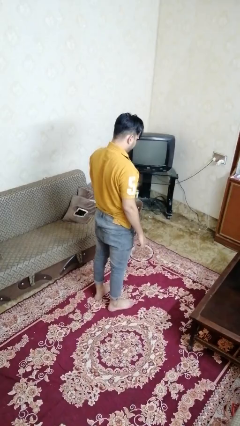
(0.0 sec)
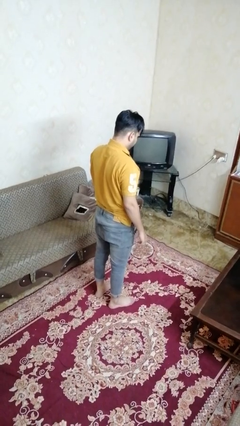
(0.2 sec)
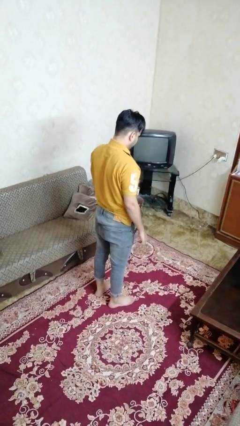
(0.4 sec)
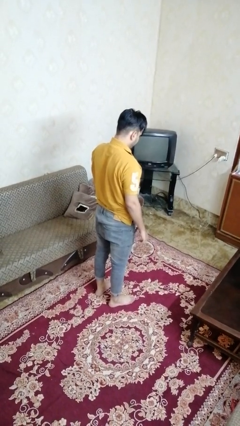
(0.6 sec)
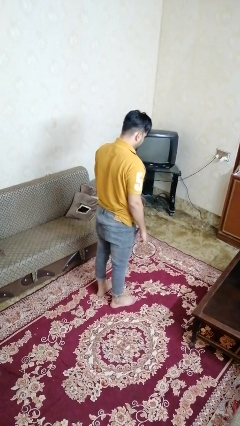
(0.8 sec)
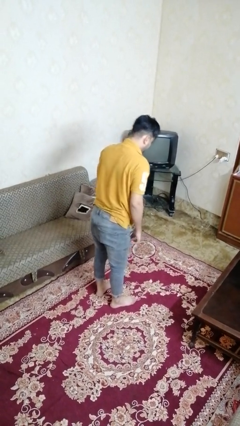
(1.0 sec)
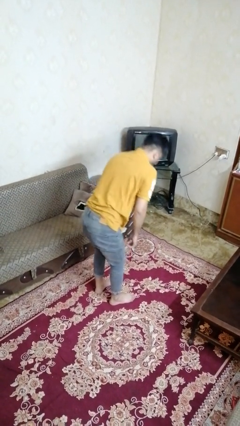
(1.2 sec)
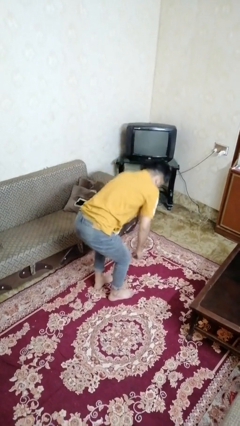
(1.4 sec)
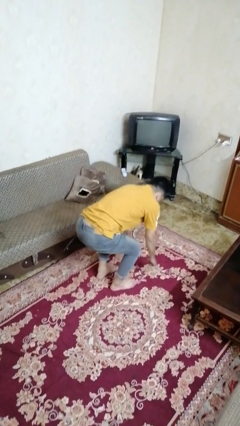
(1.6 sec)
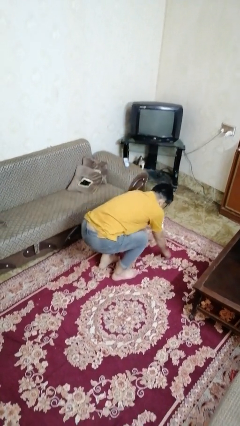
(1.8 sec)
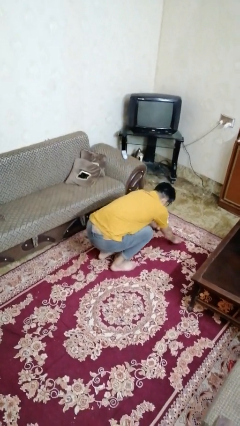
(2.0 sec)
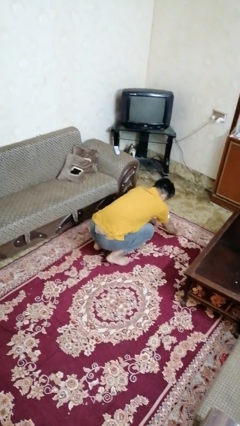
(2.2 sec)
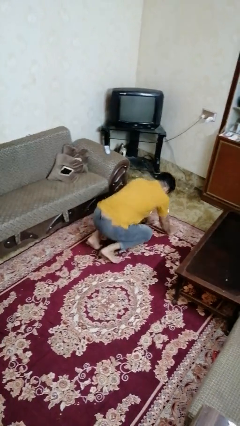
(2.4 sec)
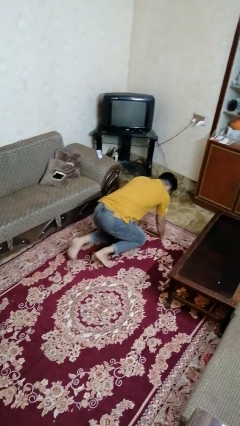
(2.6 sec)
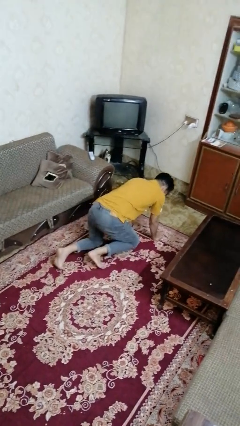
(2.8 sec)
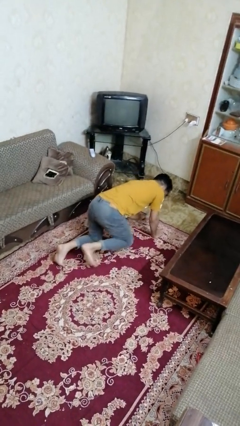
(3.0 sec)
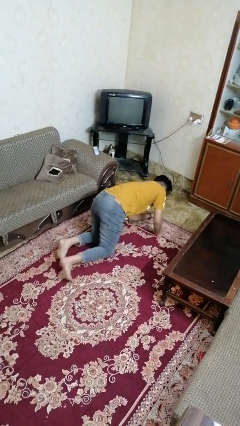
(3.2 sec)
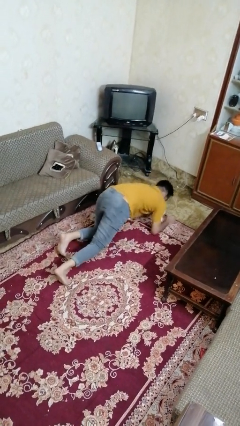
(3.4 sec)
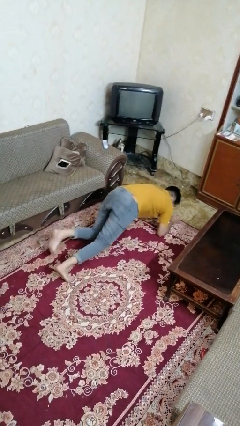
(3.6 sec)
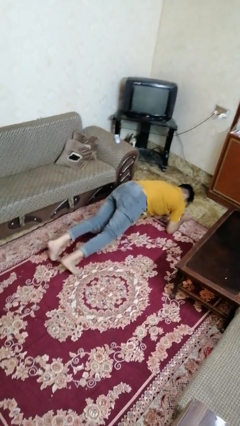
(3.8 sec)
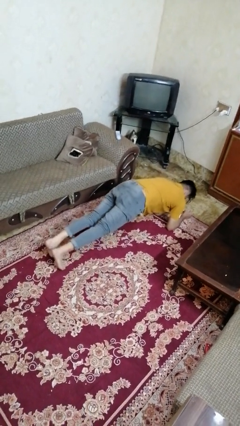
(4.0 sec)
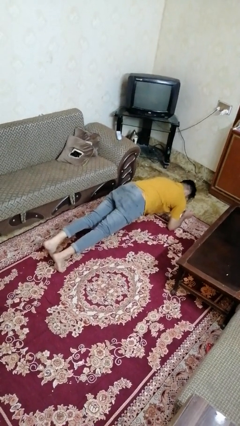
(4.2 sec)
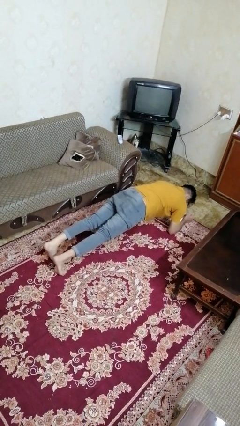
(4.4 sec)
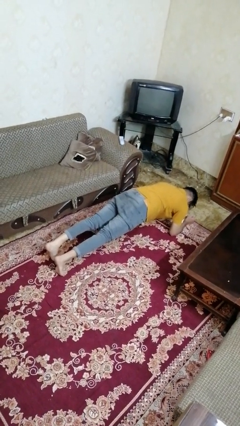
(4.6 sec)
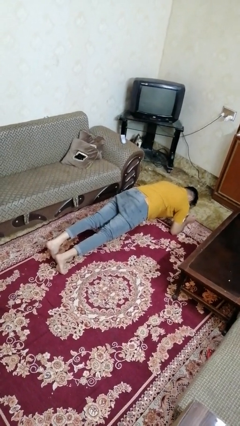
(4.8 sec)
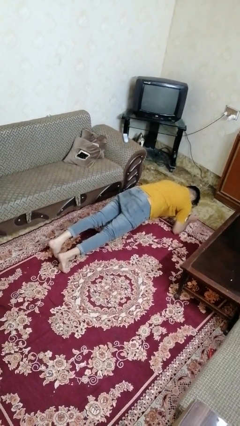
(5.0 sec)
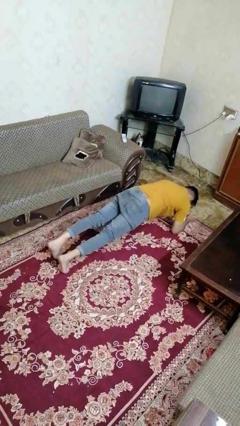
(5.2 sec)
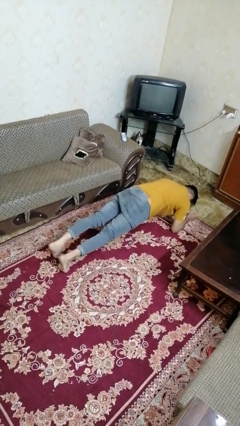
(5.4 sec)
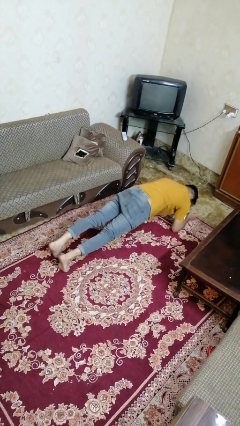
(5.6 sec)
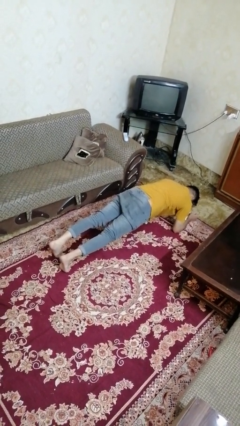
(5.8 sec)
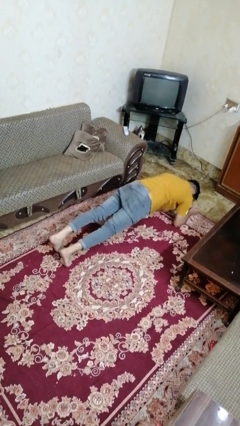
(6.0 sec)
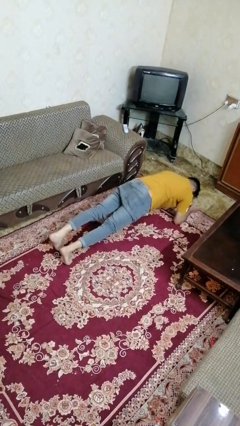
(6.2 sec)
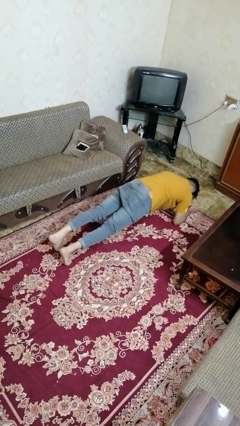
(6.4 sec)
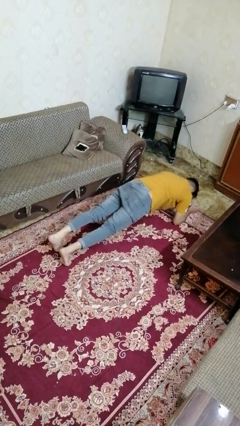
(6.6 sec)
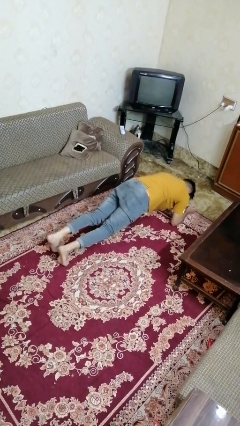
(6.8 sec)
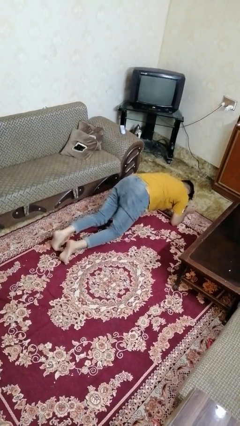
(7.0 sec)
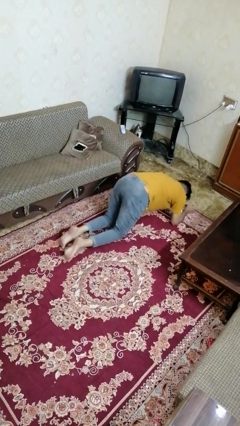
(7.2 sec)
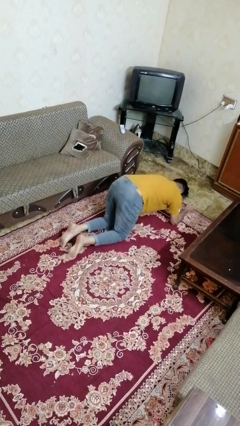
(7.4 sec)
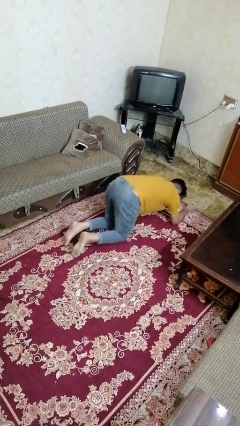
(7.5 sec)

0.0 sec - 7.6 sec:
person exercises with plank

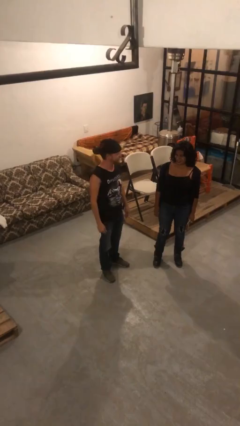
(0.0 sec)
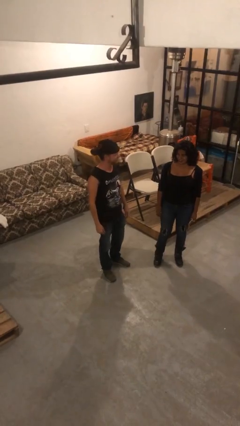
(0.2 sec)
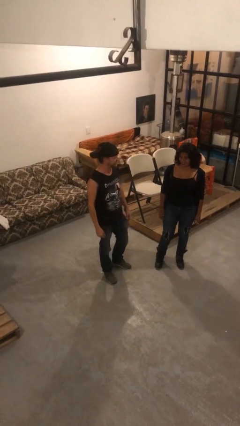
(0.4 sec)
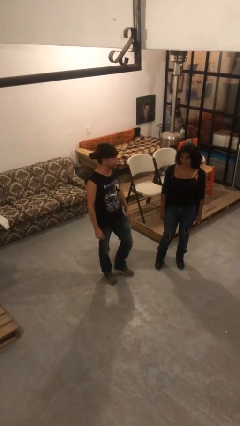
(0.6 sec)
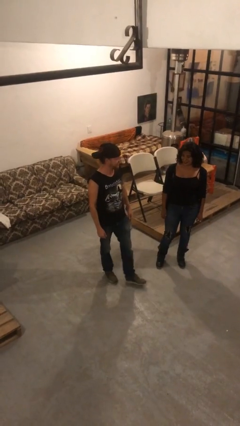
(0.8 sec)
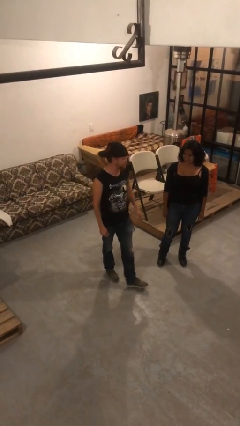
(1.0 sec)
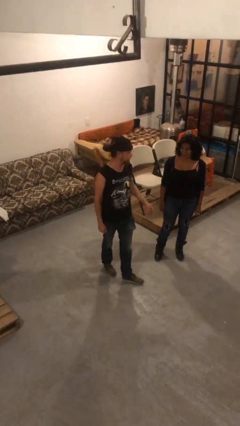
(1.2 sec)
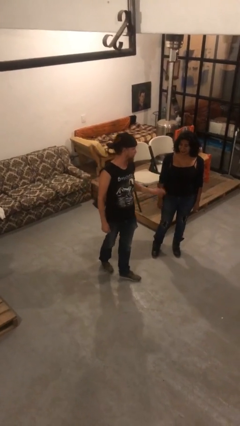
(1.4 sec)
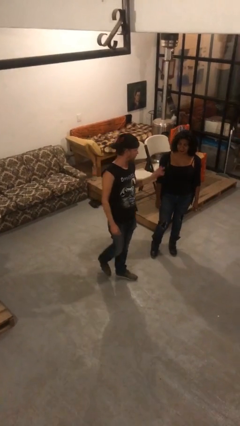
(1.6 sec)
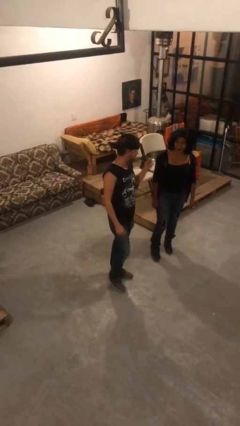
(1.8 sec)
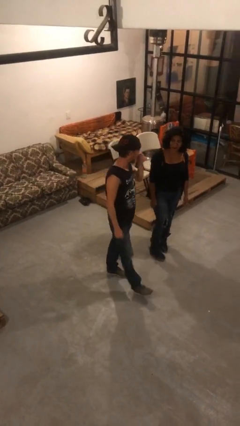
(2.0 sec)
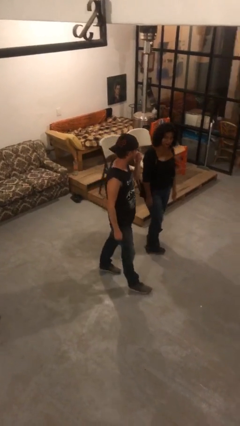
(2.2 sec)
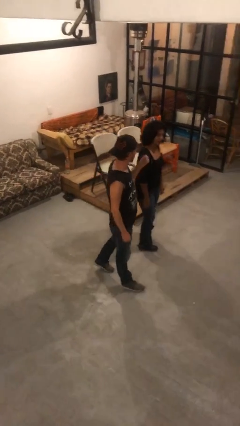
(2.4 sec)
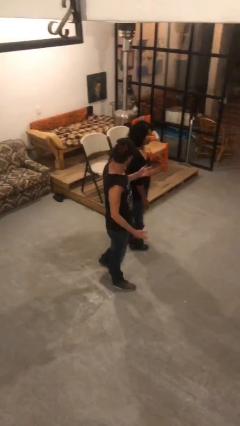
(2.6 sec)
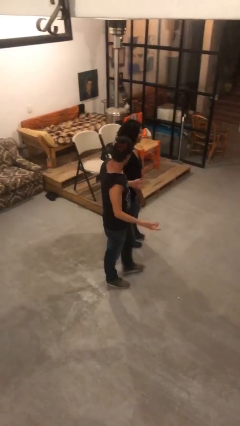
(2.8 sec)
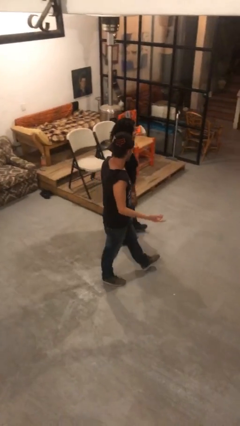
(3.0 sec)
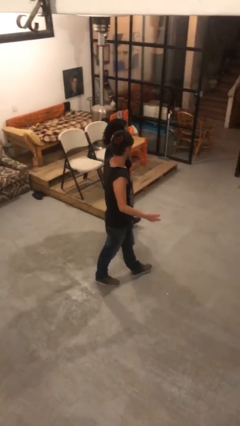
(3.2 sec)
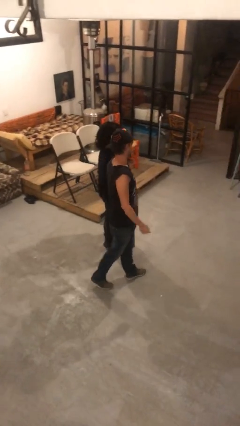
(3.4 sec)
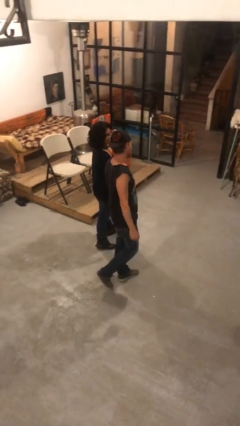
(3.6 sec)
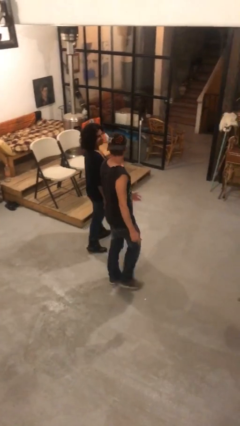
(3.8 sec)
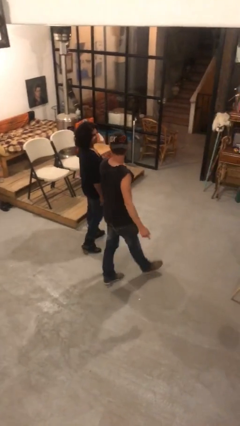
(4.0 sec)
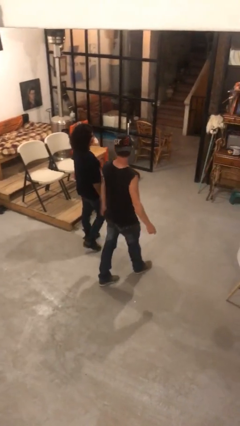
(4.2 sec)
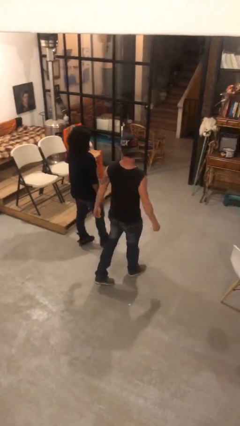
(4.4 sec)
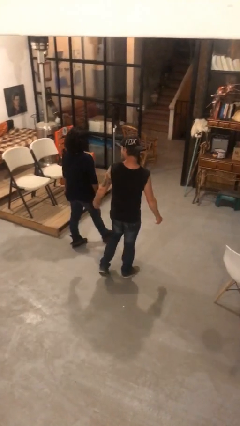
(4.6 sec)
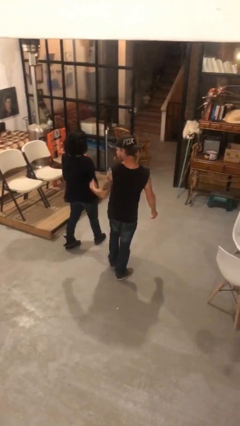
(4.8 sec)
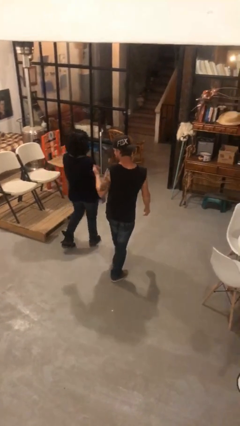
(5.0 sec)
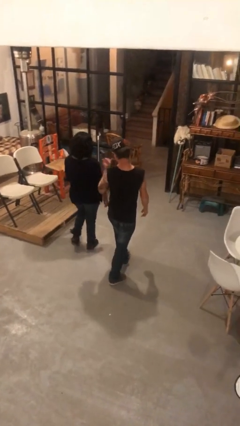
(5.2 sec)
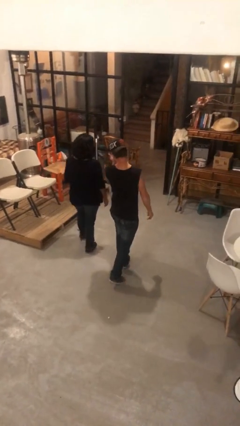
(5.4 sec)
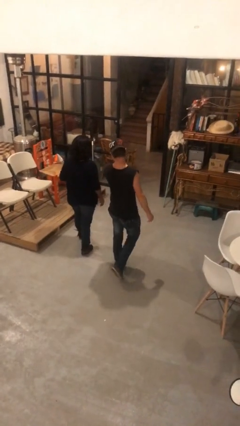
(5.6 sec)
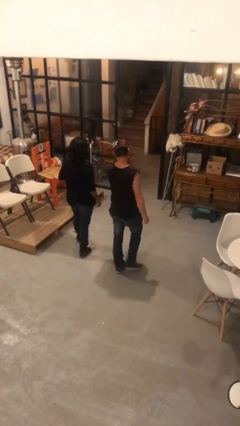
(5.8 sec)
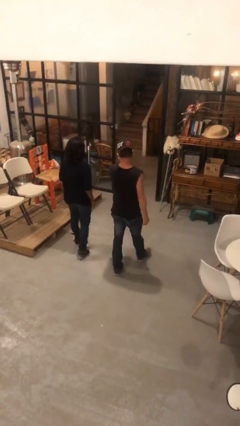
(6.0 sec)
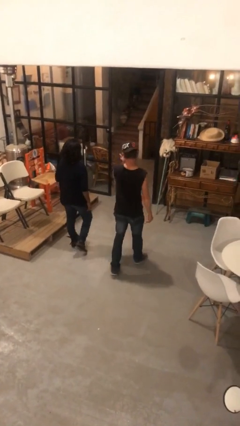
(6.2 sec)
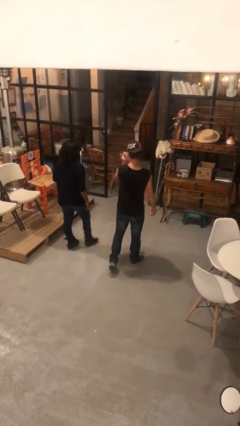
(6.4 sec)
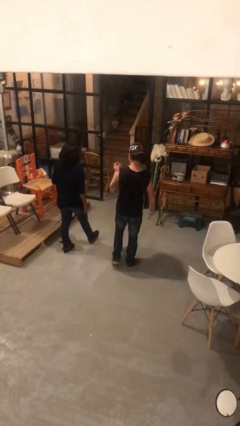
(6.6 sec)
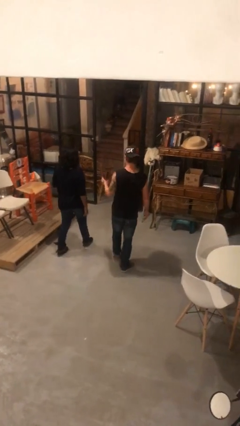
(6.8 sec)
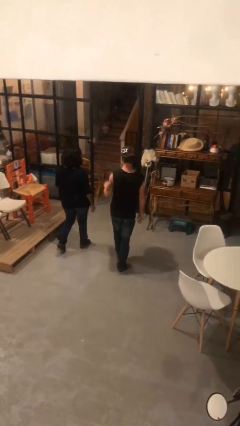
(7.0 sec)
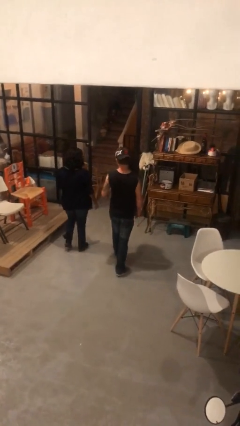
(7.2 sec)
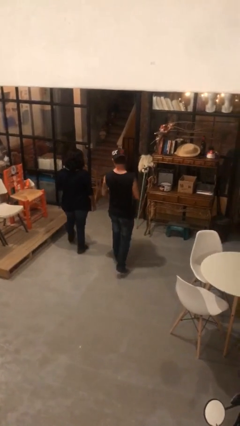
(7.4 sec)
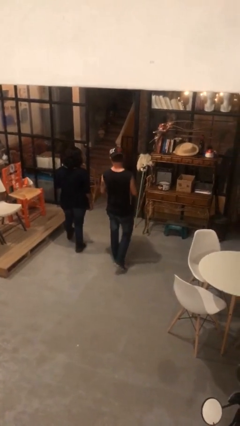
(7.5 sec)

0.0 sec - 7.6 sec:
person talks to person

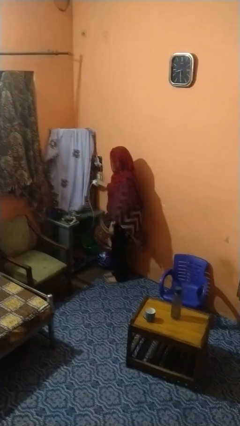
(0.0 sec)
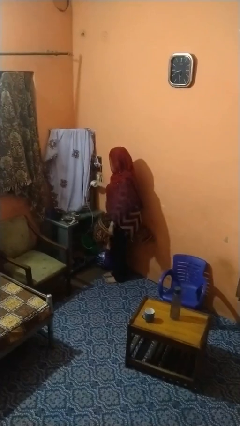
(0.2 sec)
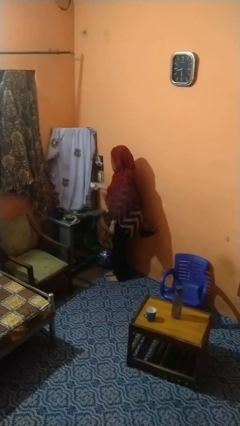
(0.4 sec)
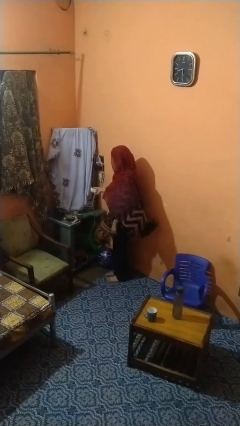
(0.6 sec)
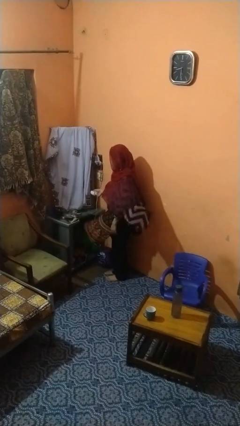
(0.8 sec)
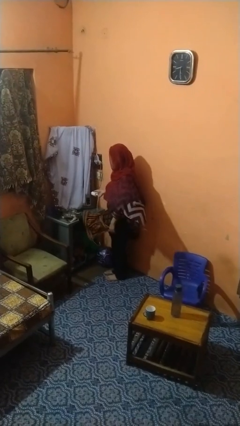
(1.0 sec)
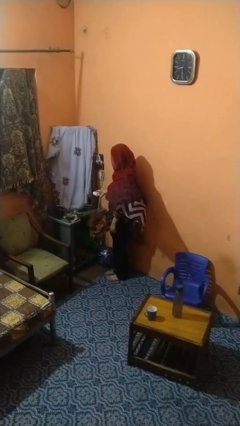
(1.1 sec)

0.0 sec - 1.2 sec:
person unplugs from electrical socket

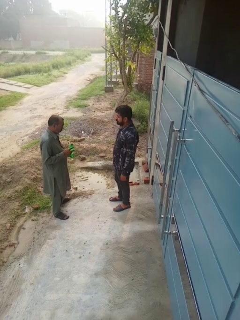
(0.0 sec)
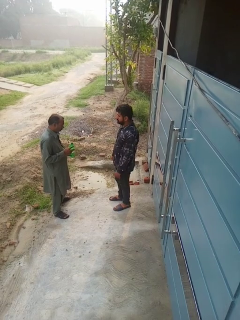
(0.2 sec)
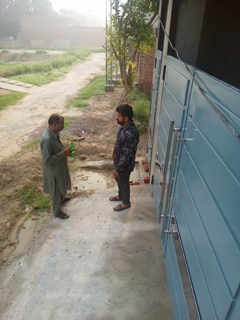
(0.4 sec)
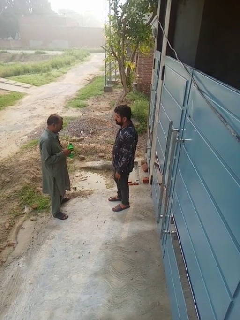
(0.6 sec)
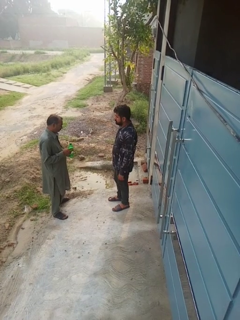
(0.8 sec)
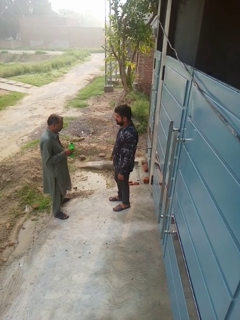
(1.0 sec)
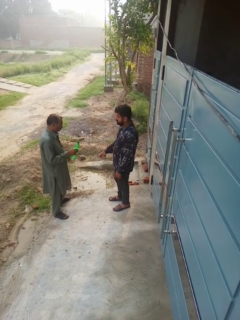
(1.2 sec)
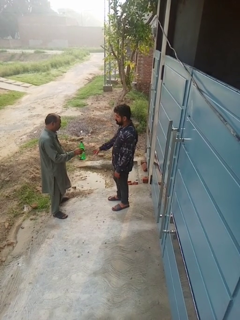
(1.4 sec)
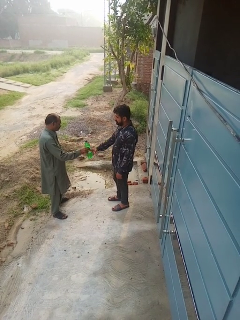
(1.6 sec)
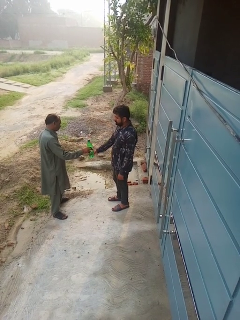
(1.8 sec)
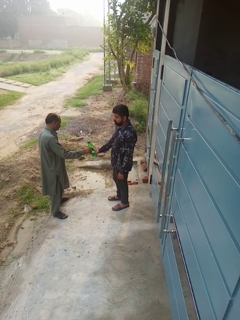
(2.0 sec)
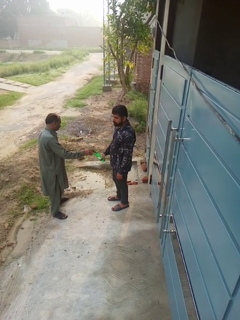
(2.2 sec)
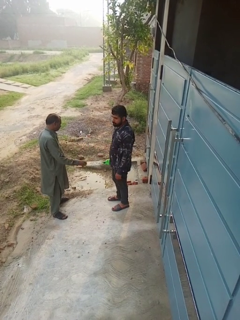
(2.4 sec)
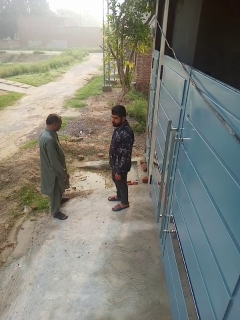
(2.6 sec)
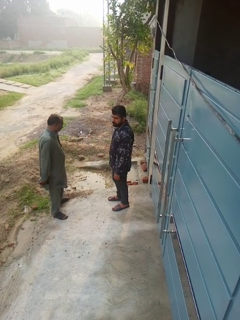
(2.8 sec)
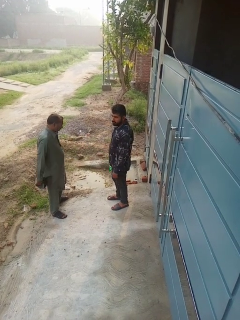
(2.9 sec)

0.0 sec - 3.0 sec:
person transfers object to person
